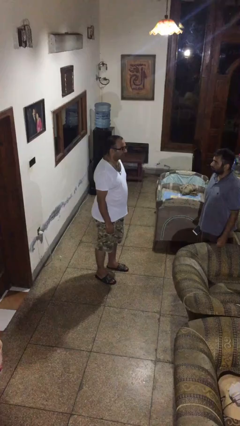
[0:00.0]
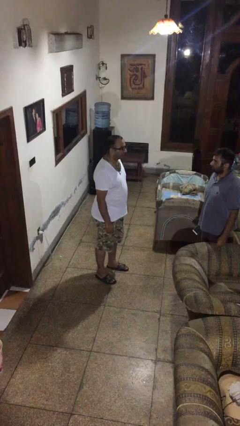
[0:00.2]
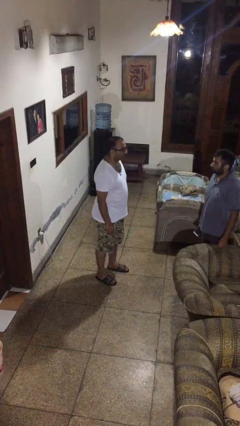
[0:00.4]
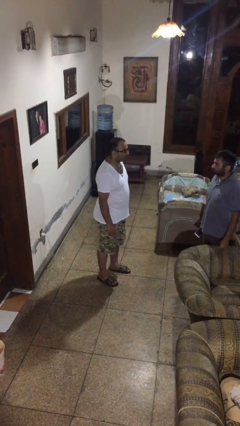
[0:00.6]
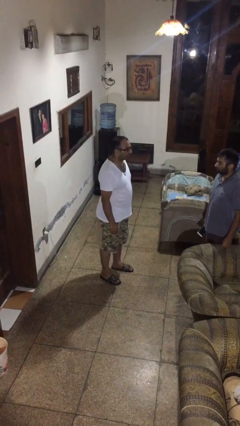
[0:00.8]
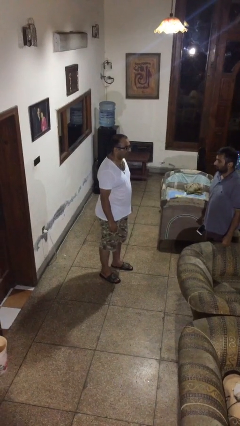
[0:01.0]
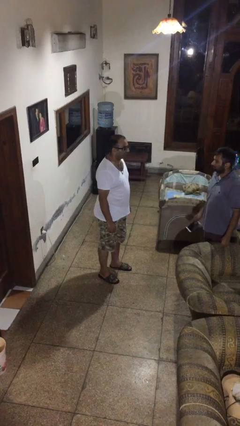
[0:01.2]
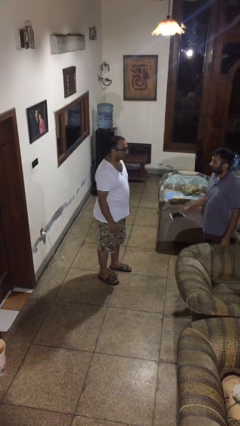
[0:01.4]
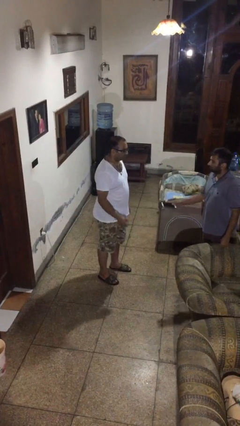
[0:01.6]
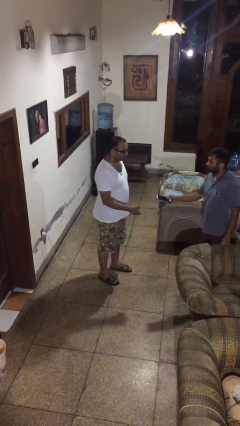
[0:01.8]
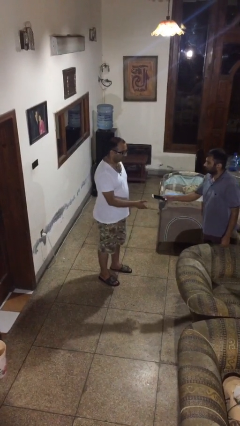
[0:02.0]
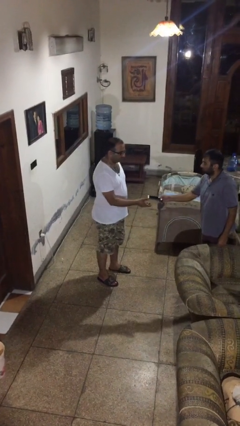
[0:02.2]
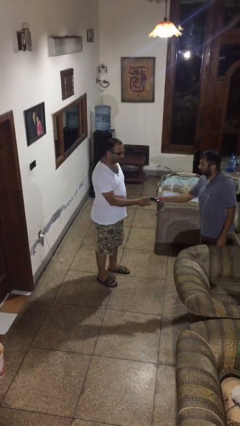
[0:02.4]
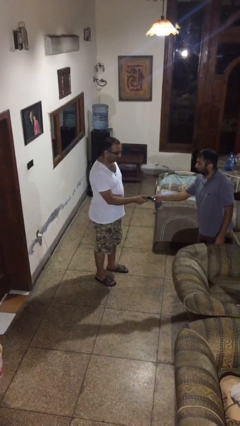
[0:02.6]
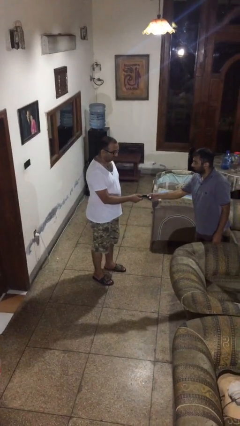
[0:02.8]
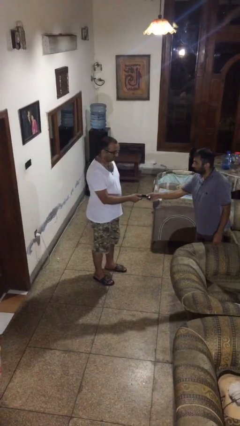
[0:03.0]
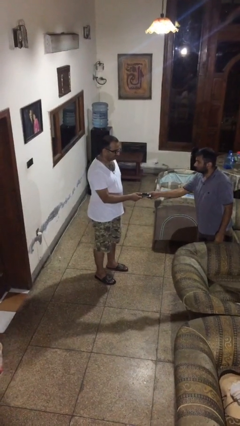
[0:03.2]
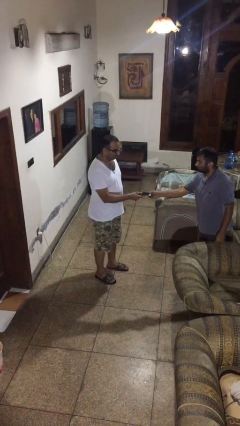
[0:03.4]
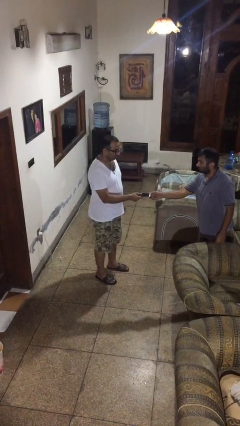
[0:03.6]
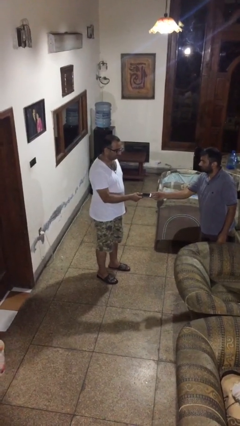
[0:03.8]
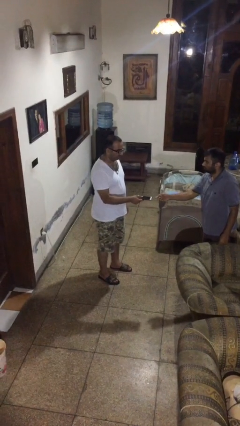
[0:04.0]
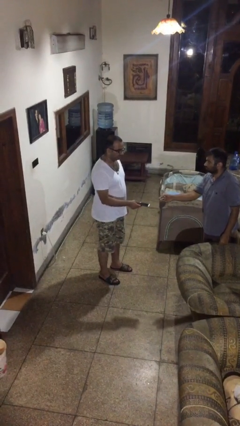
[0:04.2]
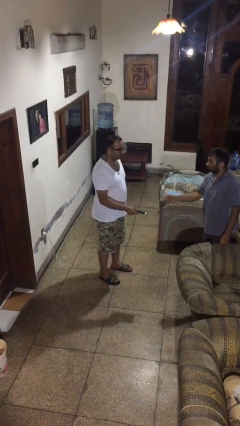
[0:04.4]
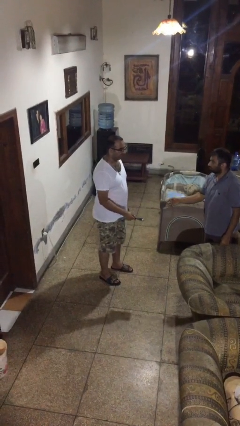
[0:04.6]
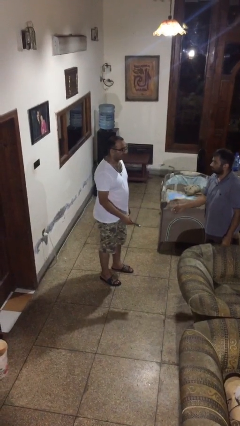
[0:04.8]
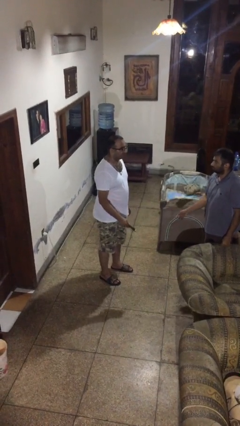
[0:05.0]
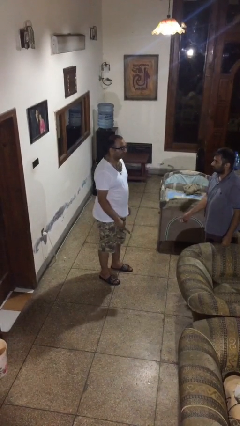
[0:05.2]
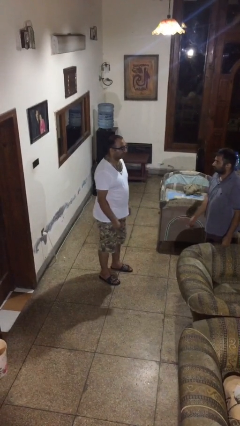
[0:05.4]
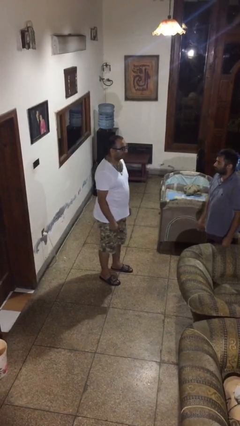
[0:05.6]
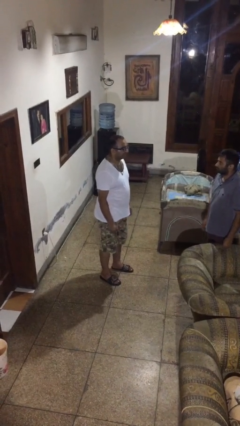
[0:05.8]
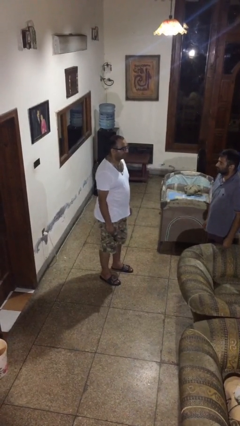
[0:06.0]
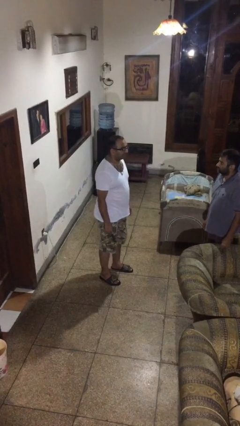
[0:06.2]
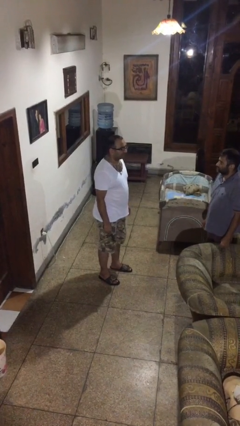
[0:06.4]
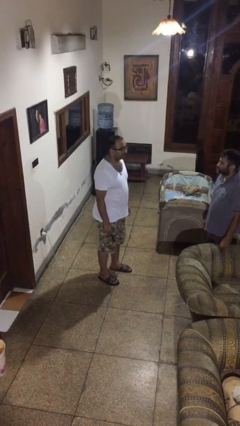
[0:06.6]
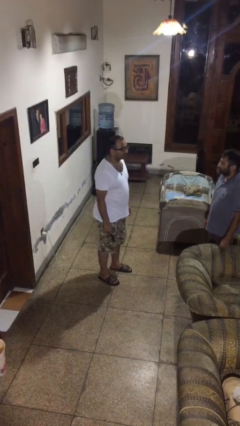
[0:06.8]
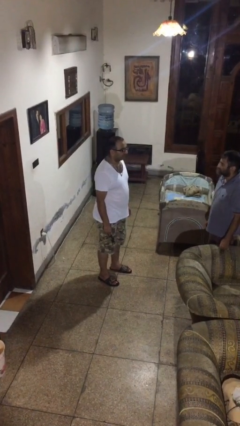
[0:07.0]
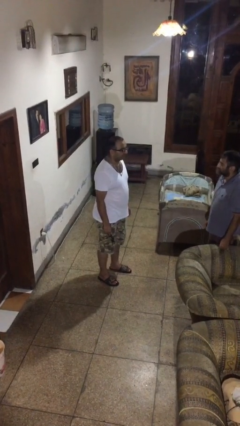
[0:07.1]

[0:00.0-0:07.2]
person transfers object to person

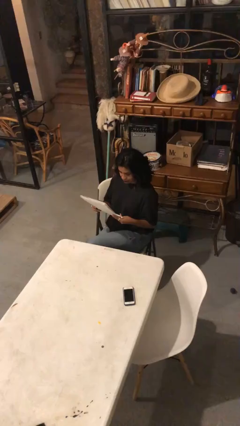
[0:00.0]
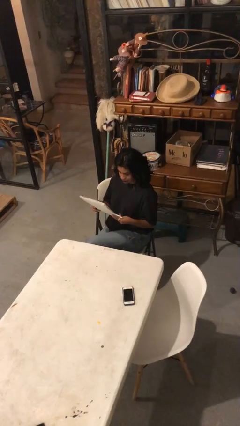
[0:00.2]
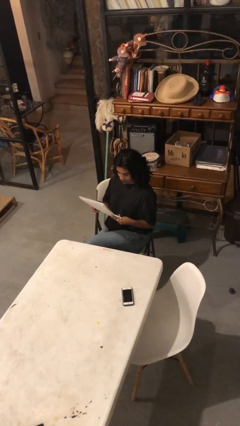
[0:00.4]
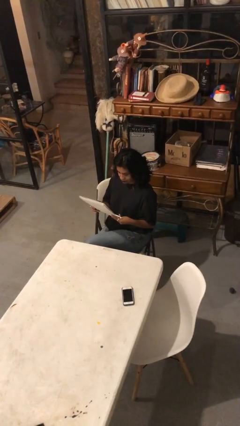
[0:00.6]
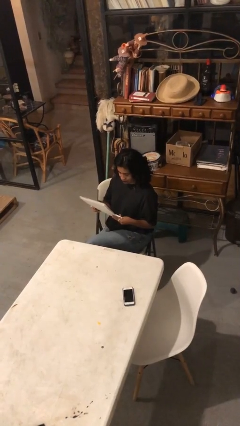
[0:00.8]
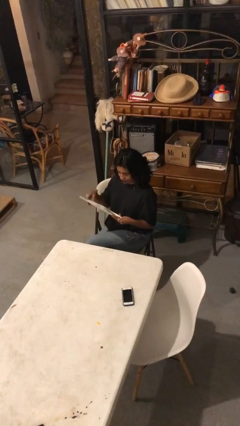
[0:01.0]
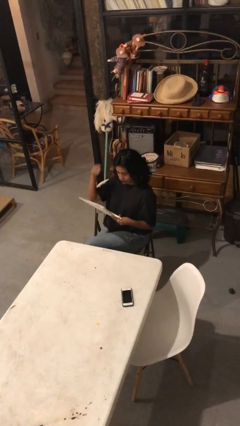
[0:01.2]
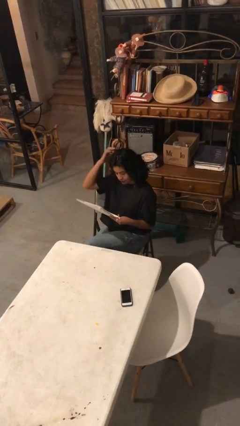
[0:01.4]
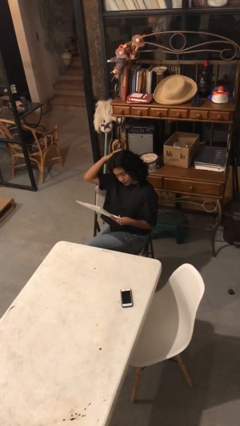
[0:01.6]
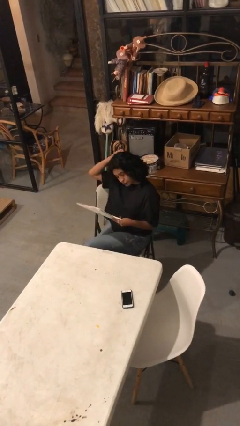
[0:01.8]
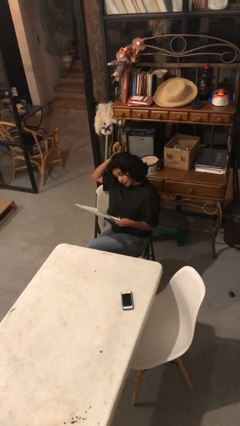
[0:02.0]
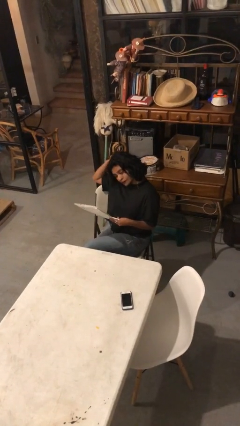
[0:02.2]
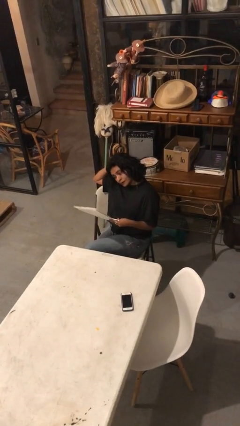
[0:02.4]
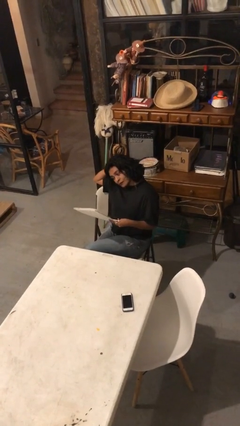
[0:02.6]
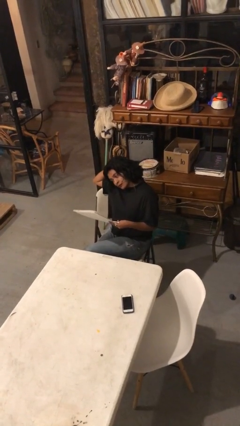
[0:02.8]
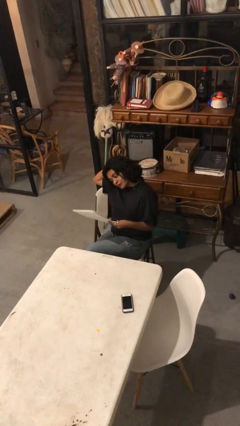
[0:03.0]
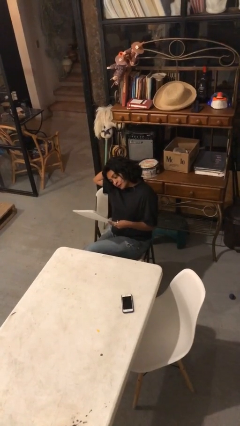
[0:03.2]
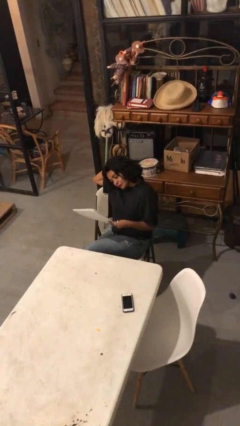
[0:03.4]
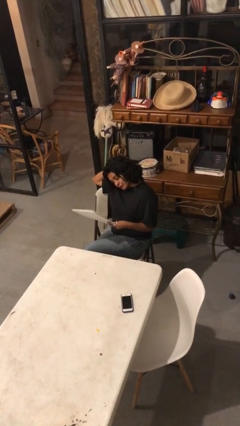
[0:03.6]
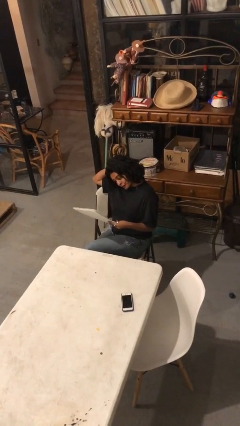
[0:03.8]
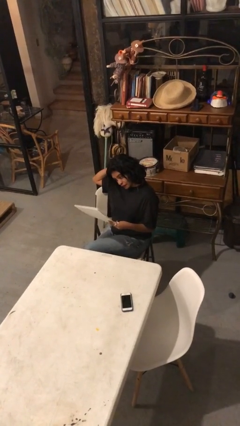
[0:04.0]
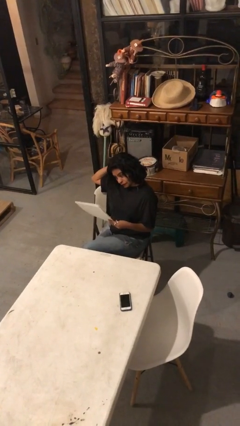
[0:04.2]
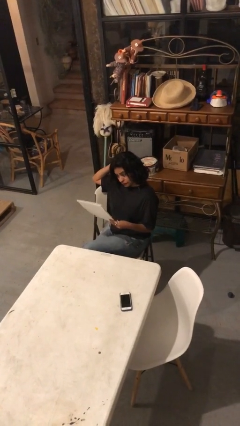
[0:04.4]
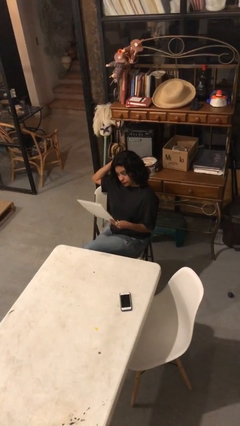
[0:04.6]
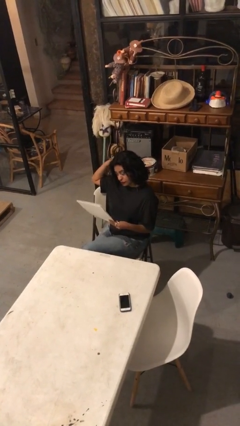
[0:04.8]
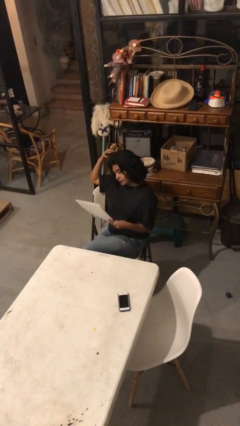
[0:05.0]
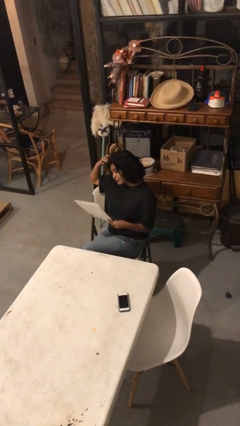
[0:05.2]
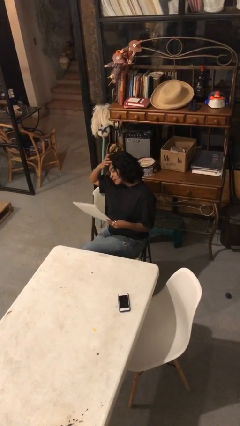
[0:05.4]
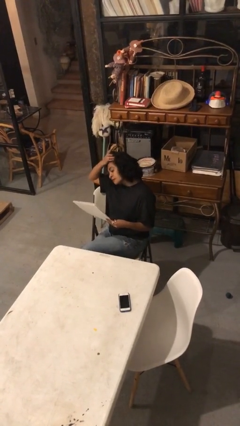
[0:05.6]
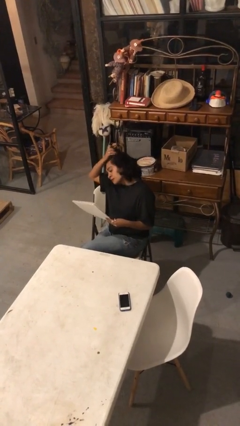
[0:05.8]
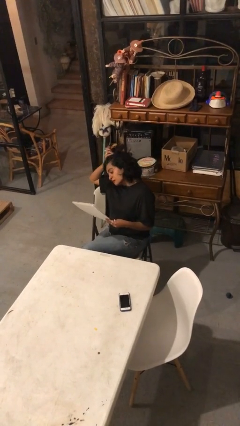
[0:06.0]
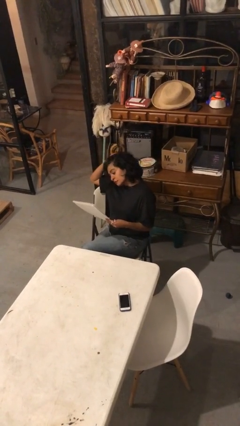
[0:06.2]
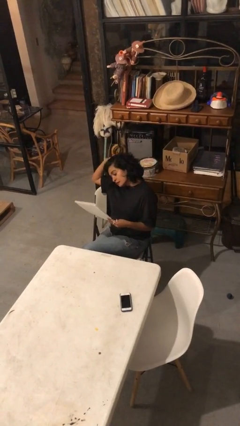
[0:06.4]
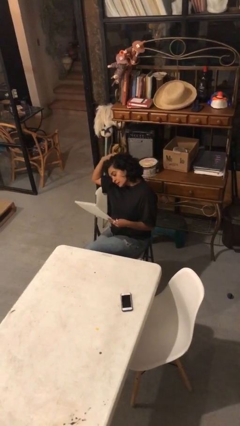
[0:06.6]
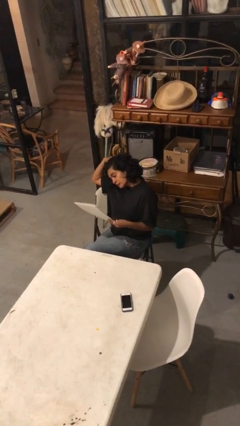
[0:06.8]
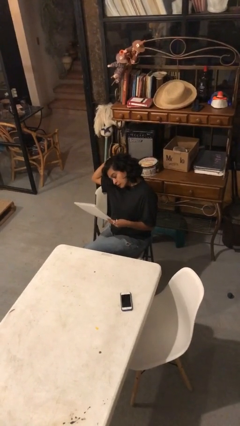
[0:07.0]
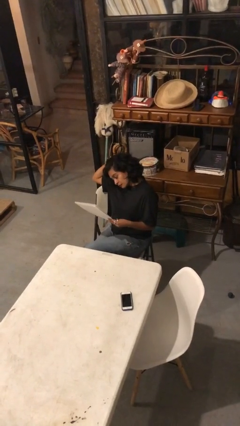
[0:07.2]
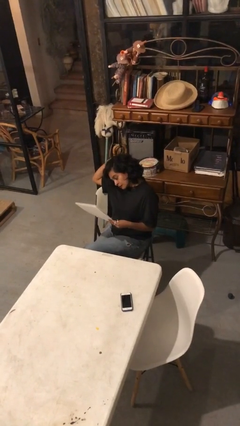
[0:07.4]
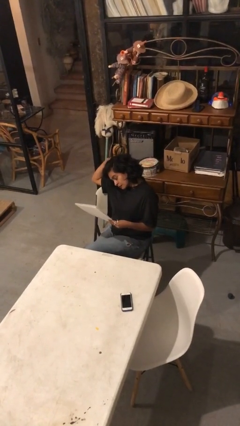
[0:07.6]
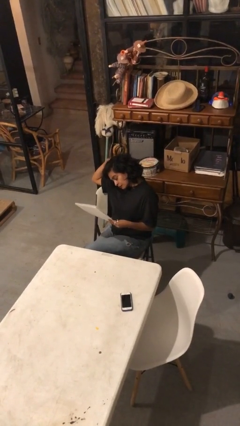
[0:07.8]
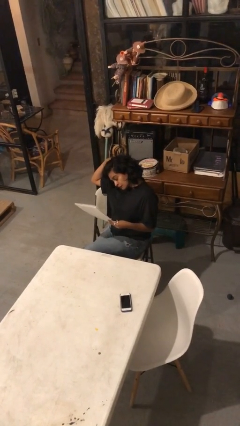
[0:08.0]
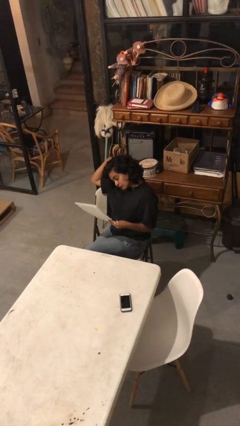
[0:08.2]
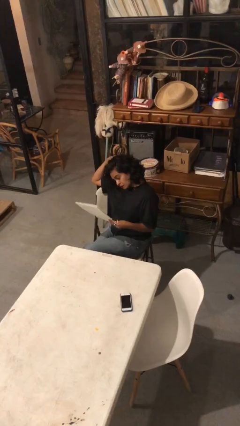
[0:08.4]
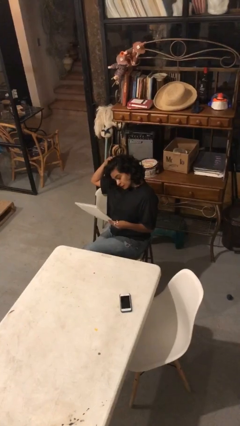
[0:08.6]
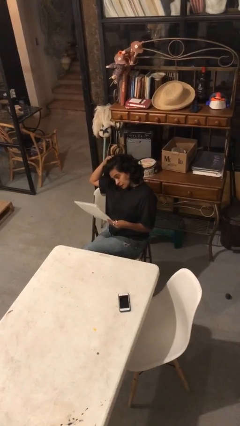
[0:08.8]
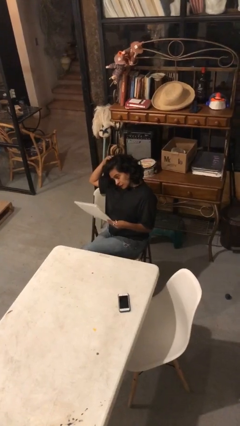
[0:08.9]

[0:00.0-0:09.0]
person reads document

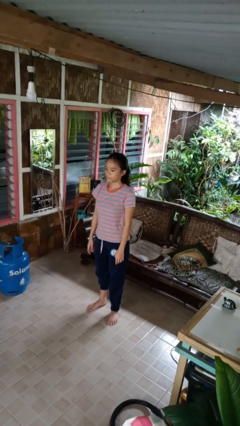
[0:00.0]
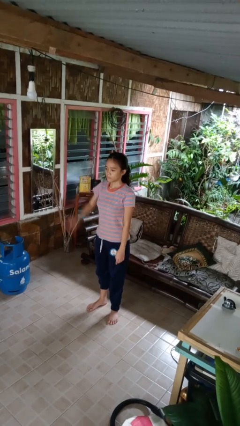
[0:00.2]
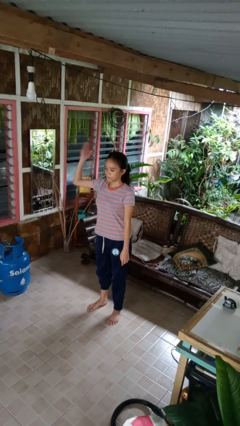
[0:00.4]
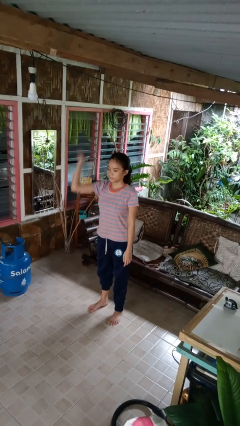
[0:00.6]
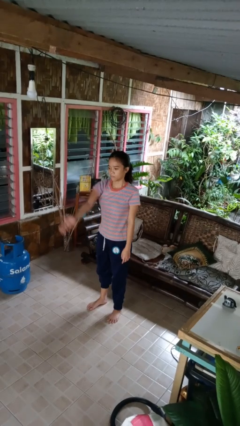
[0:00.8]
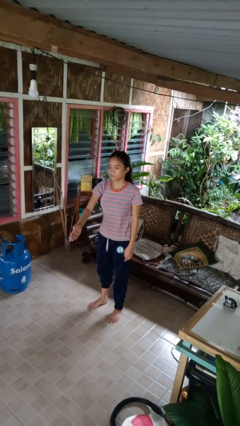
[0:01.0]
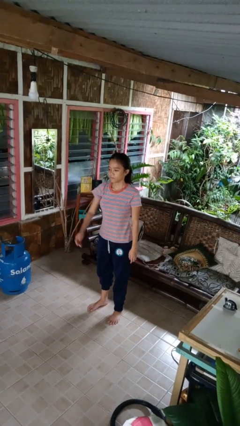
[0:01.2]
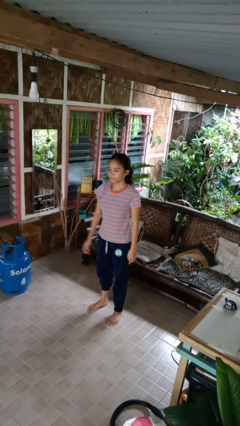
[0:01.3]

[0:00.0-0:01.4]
person karate chop

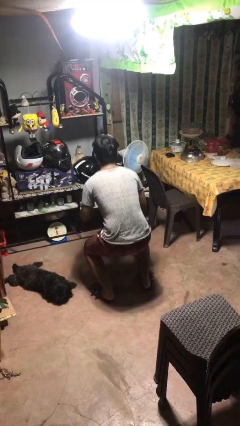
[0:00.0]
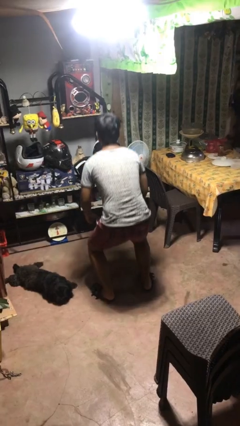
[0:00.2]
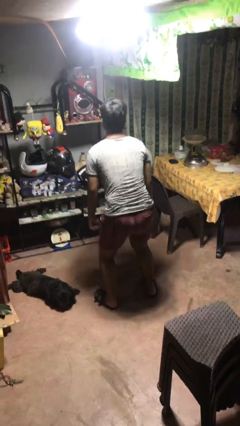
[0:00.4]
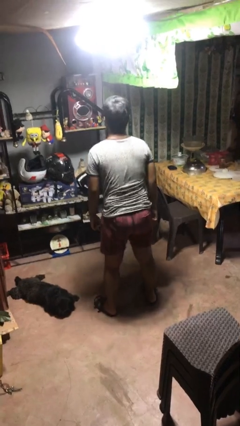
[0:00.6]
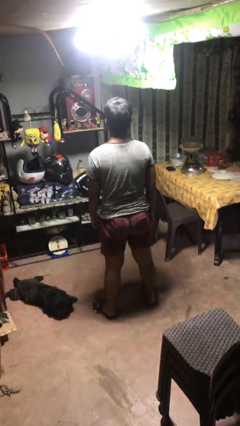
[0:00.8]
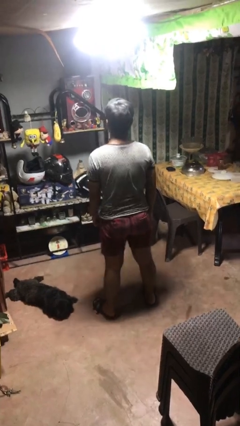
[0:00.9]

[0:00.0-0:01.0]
person stands up
